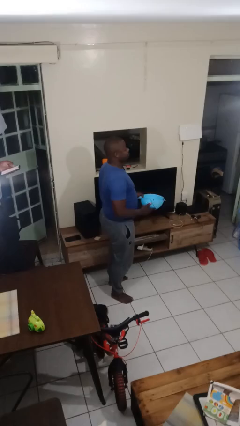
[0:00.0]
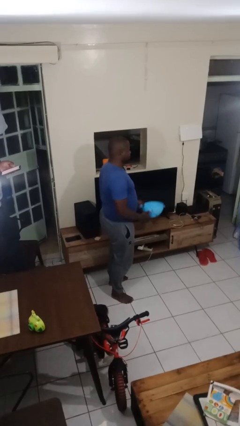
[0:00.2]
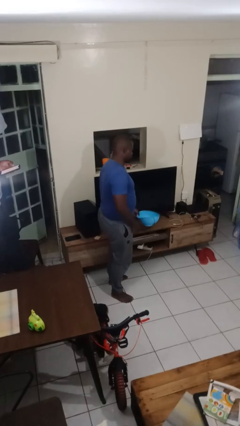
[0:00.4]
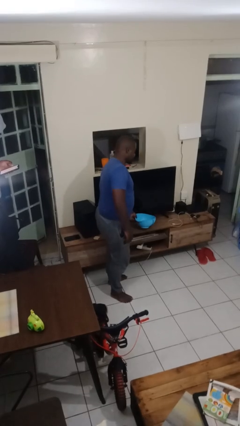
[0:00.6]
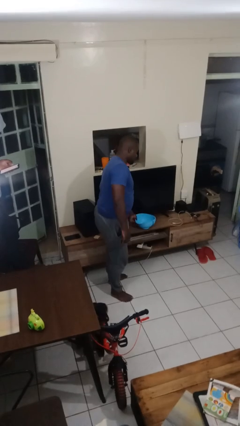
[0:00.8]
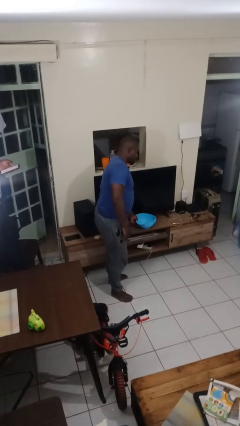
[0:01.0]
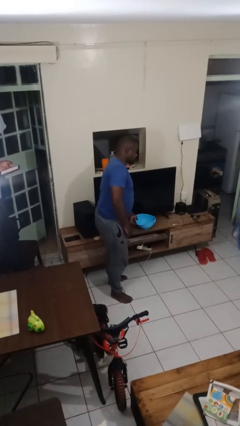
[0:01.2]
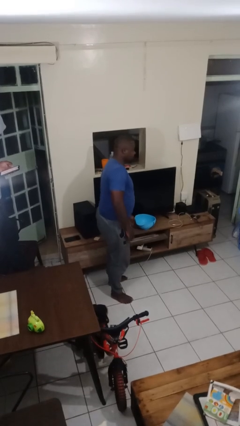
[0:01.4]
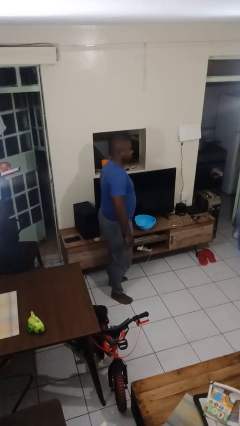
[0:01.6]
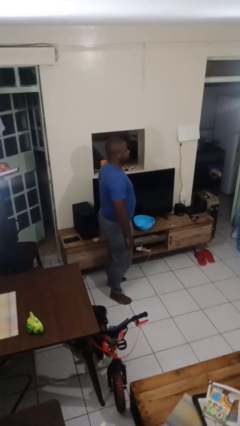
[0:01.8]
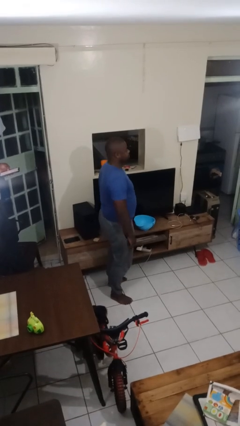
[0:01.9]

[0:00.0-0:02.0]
person puts down object on countertop

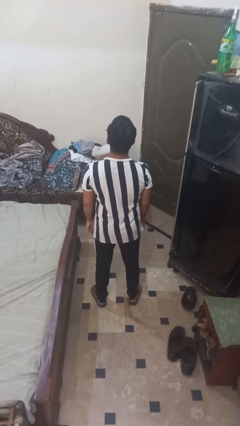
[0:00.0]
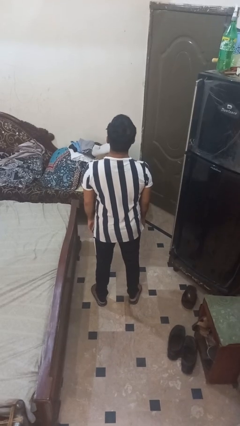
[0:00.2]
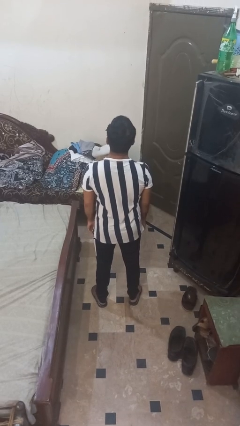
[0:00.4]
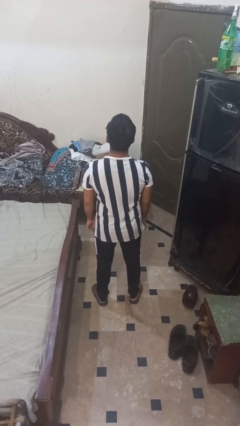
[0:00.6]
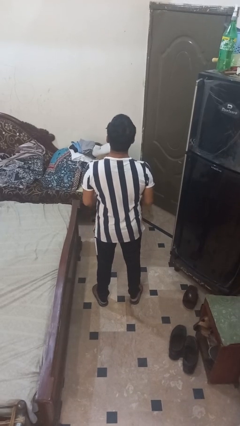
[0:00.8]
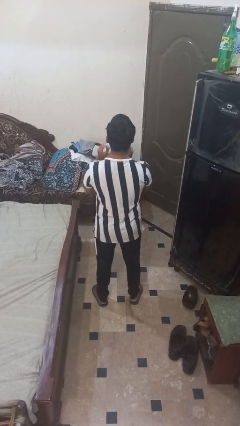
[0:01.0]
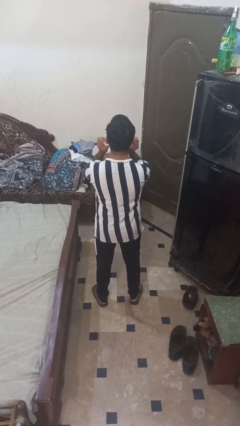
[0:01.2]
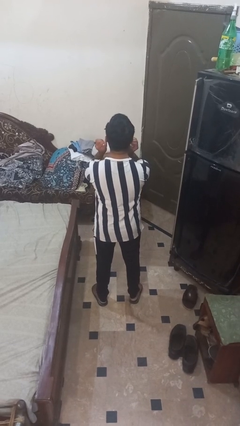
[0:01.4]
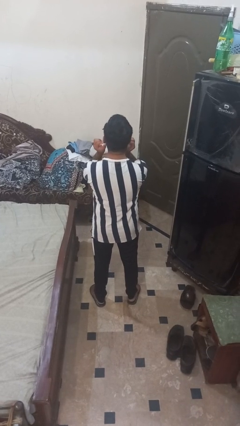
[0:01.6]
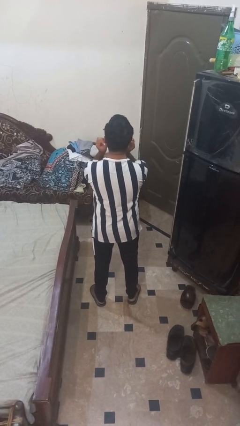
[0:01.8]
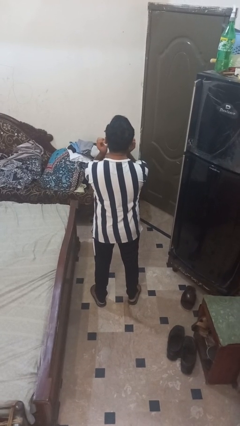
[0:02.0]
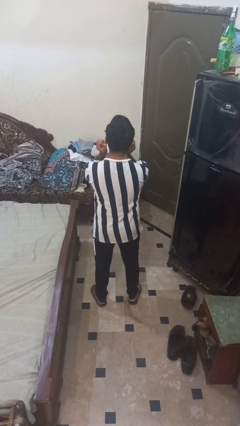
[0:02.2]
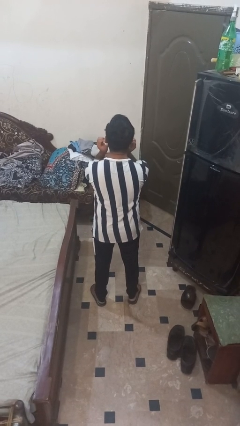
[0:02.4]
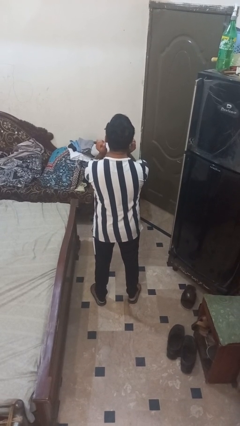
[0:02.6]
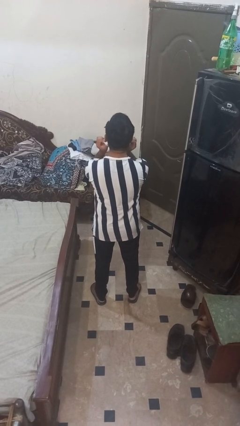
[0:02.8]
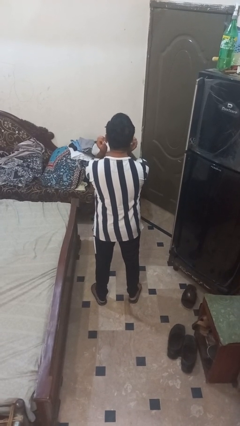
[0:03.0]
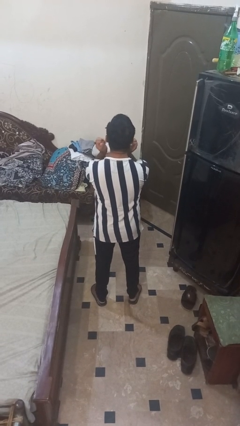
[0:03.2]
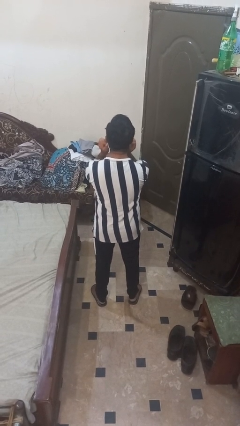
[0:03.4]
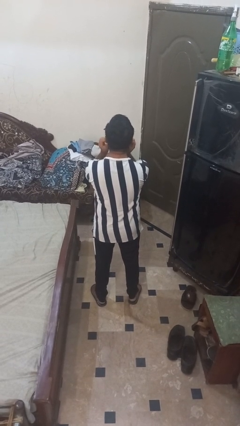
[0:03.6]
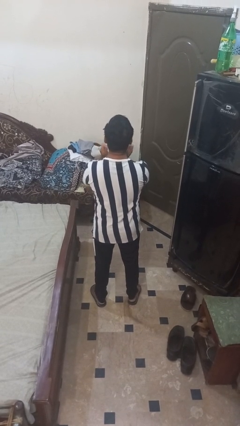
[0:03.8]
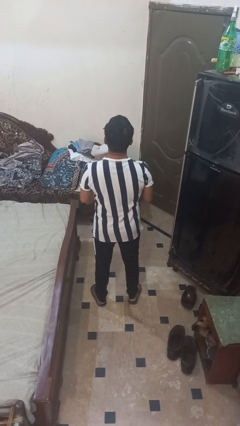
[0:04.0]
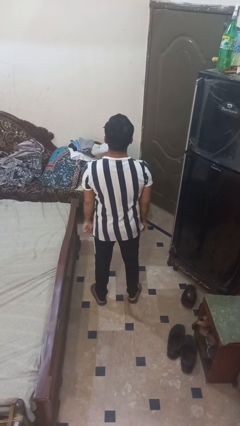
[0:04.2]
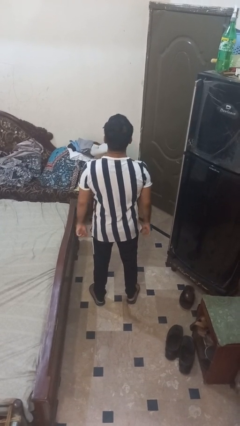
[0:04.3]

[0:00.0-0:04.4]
person touches earlobe

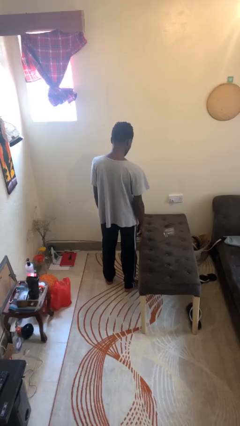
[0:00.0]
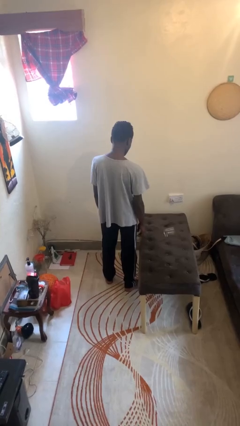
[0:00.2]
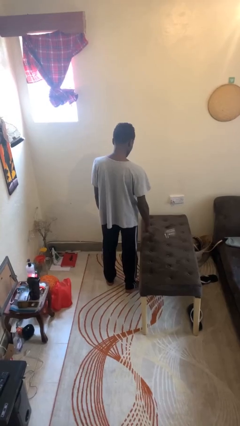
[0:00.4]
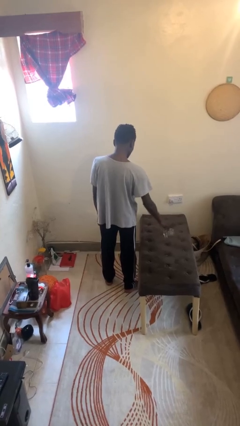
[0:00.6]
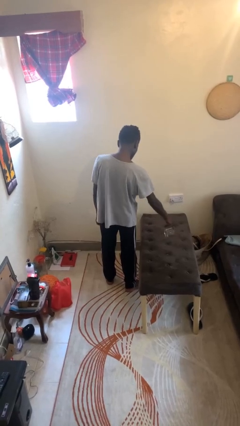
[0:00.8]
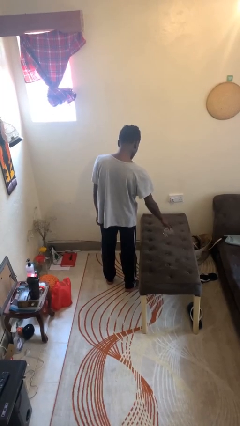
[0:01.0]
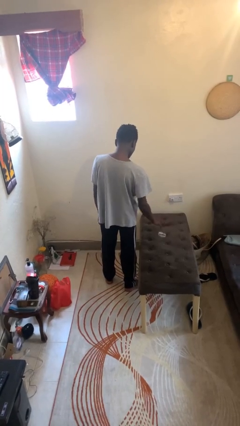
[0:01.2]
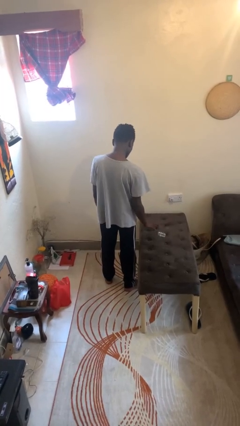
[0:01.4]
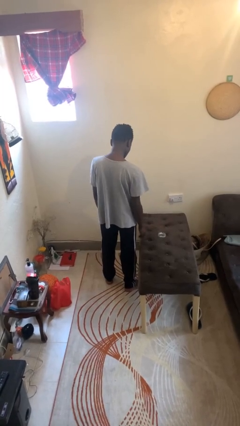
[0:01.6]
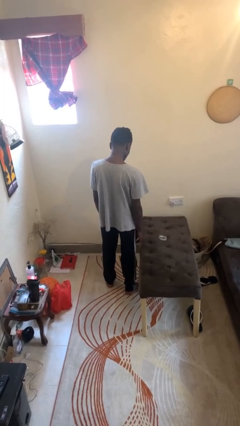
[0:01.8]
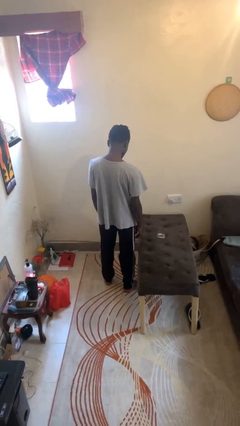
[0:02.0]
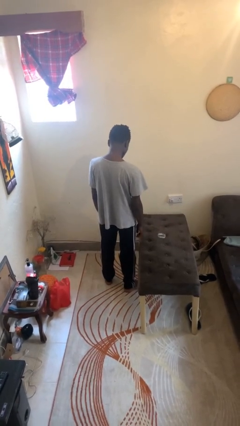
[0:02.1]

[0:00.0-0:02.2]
person sets upright glass

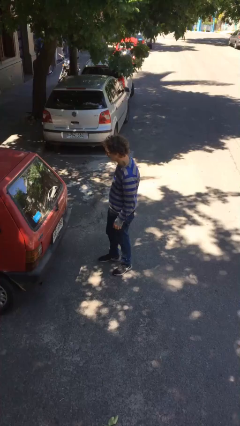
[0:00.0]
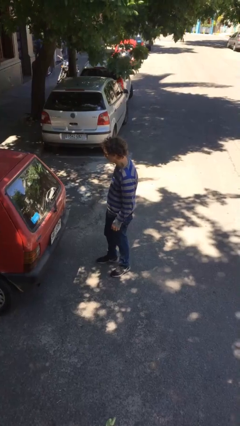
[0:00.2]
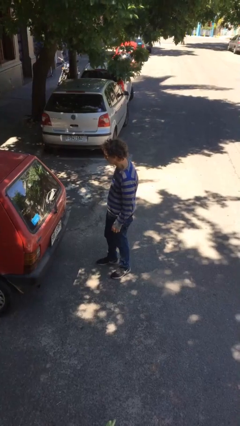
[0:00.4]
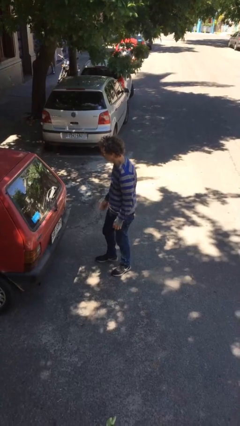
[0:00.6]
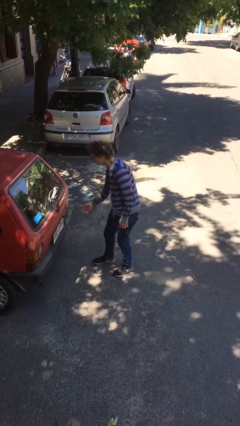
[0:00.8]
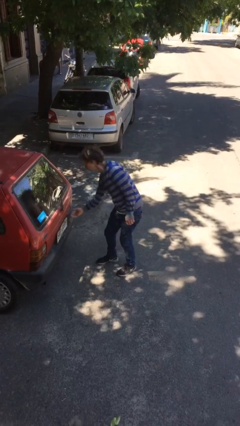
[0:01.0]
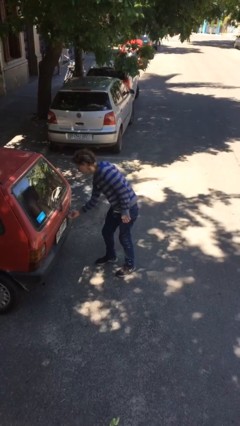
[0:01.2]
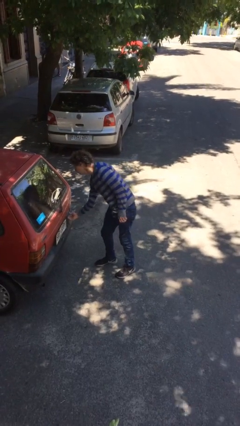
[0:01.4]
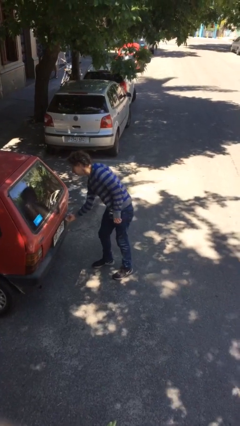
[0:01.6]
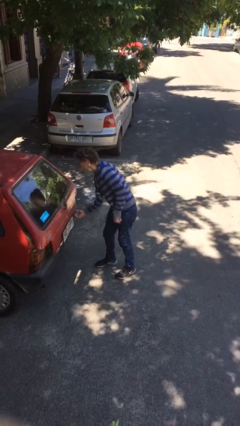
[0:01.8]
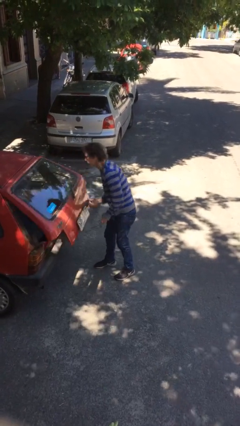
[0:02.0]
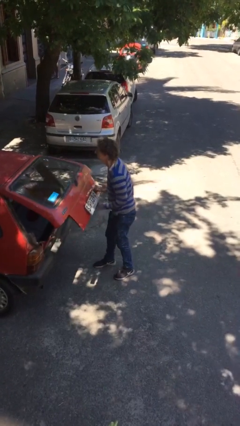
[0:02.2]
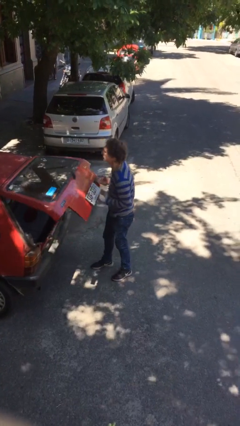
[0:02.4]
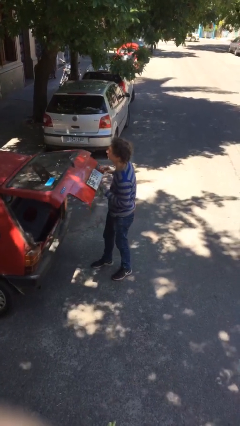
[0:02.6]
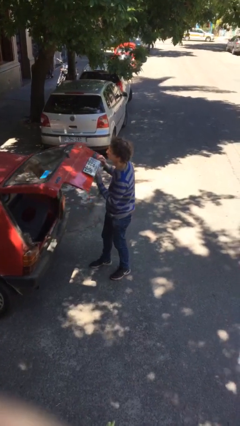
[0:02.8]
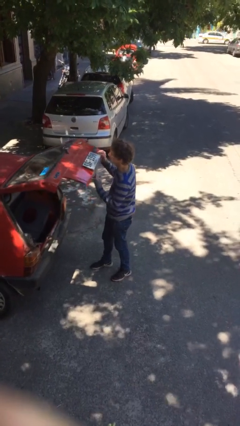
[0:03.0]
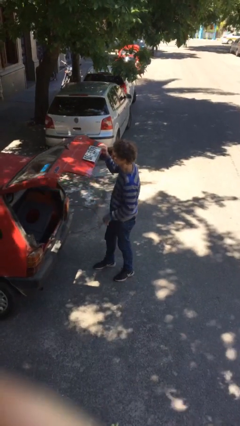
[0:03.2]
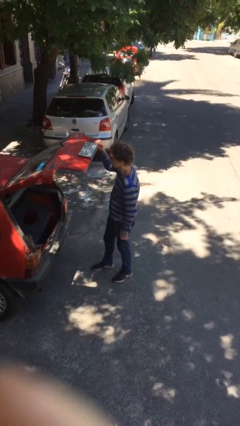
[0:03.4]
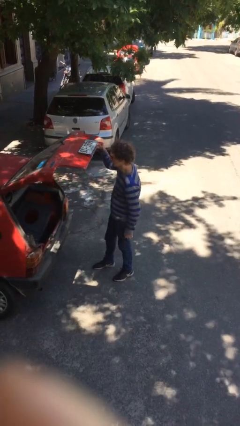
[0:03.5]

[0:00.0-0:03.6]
person opens car trunk

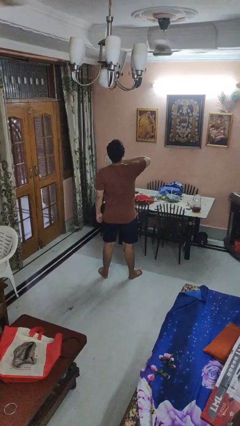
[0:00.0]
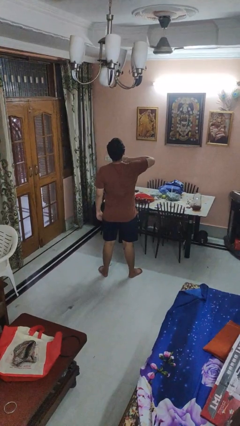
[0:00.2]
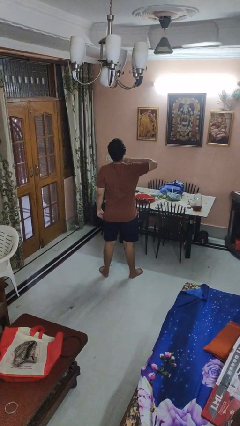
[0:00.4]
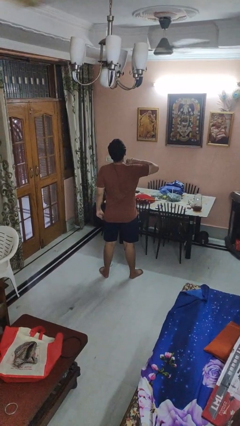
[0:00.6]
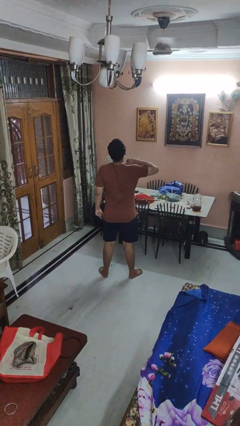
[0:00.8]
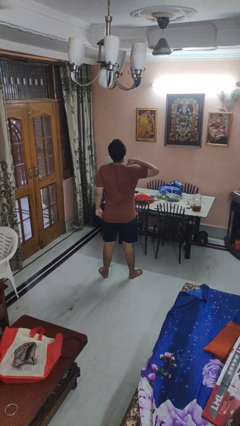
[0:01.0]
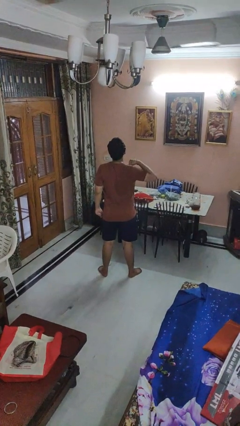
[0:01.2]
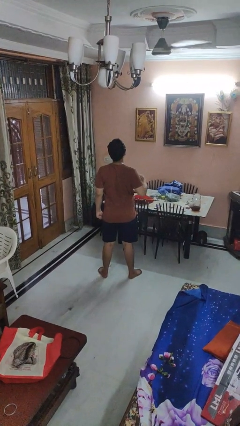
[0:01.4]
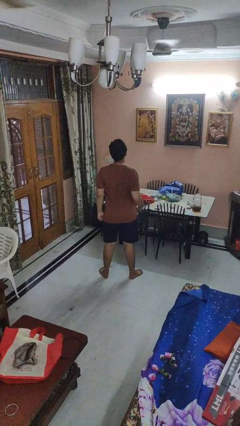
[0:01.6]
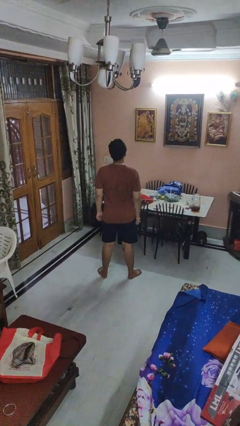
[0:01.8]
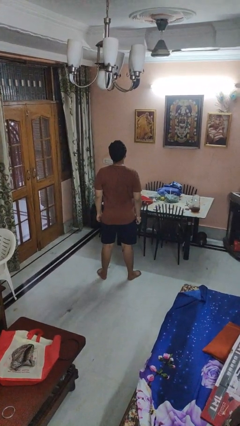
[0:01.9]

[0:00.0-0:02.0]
person gestures cut

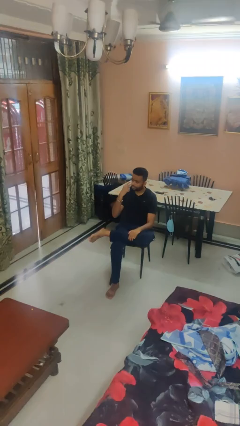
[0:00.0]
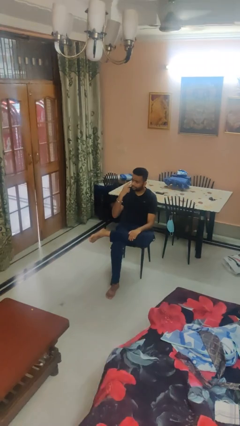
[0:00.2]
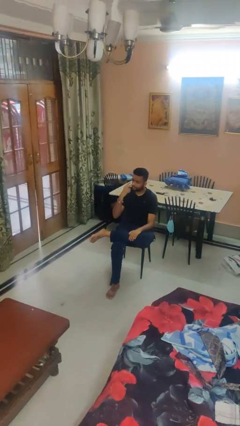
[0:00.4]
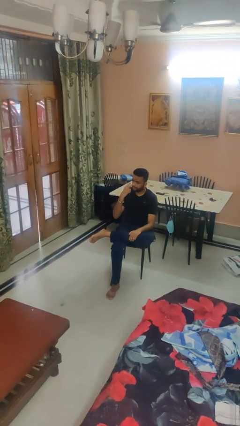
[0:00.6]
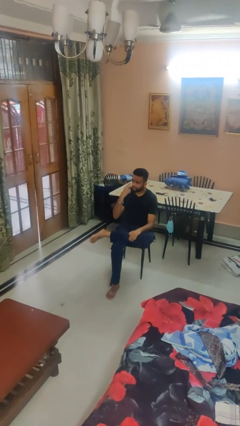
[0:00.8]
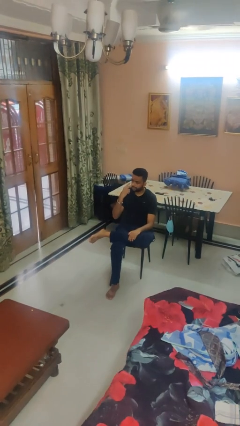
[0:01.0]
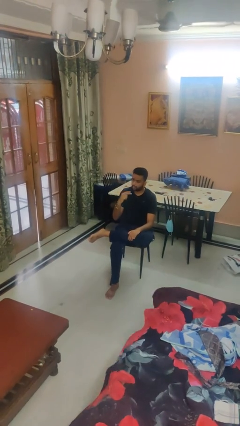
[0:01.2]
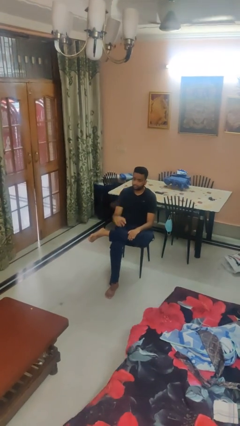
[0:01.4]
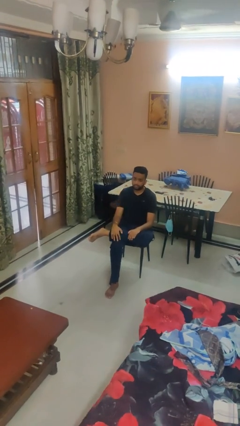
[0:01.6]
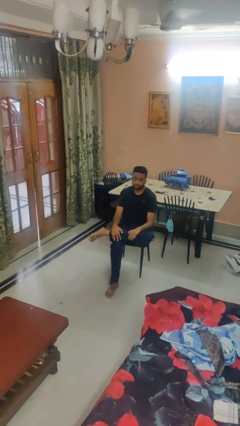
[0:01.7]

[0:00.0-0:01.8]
person gestures watch closely

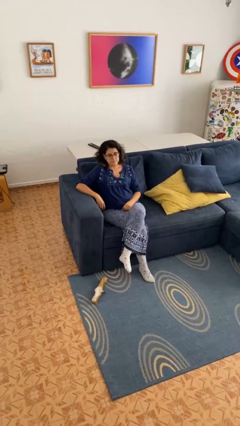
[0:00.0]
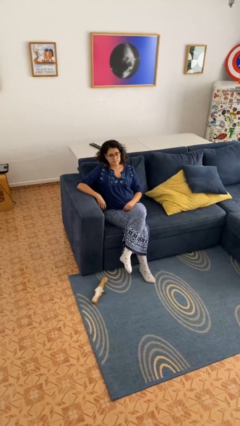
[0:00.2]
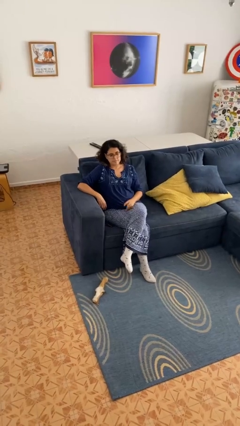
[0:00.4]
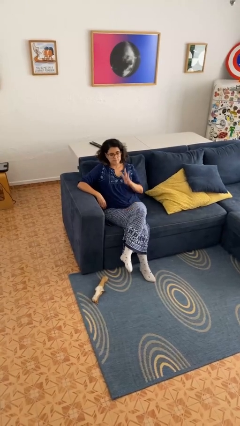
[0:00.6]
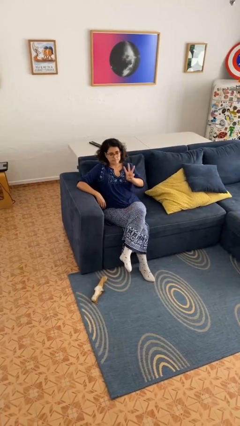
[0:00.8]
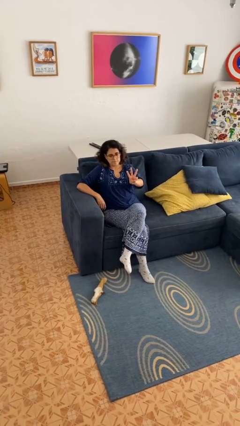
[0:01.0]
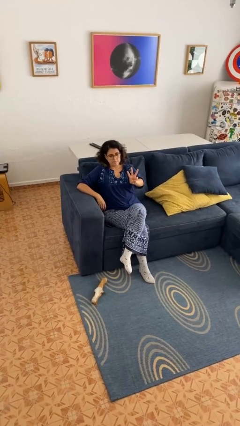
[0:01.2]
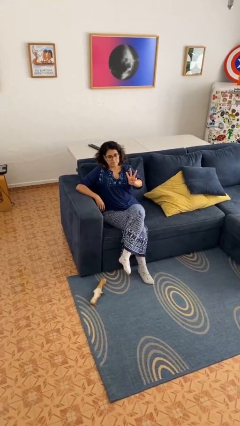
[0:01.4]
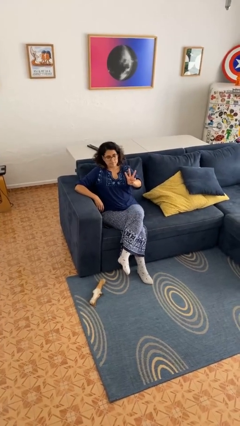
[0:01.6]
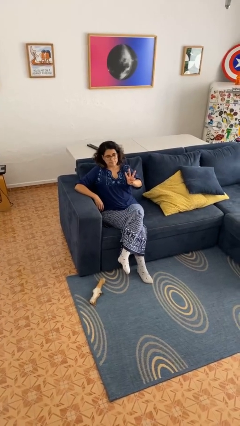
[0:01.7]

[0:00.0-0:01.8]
person gestures number three
